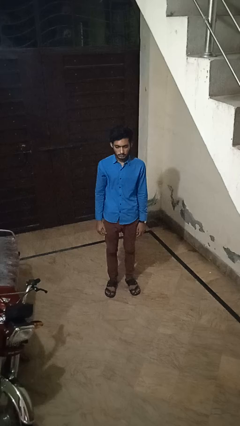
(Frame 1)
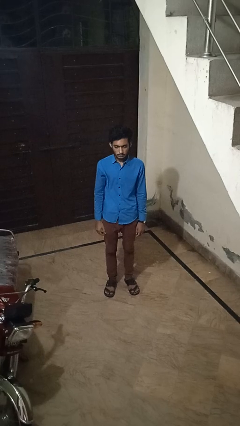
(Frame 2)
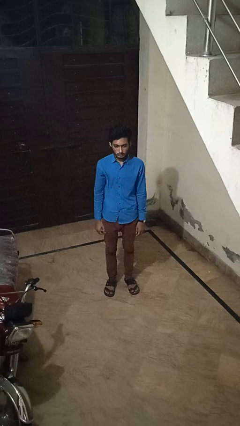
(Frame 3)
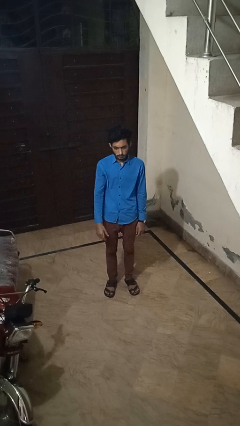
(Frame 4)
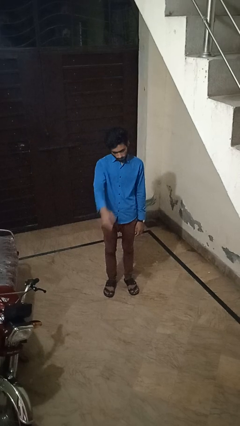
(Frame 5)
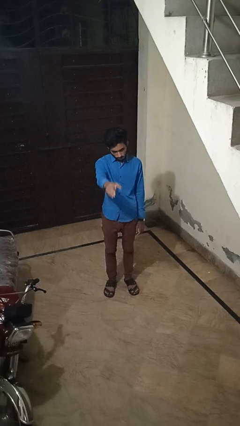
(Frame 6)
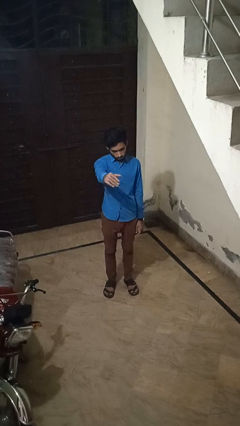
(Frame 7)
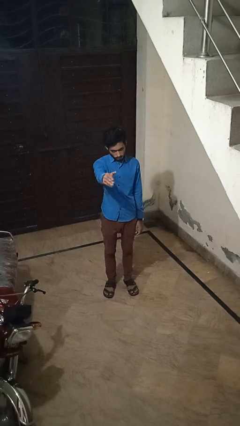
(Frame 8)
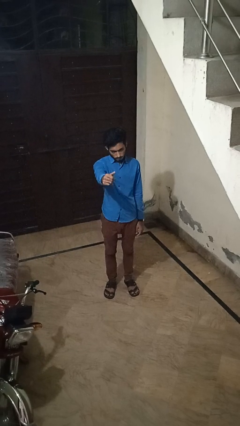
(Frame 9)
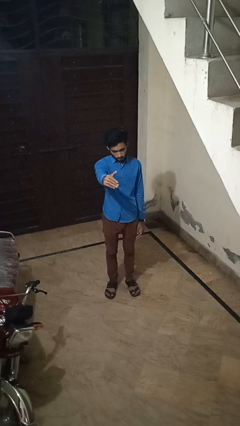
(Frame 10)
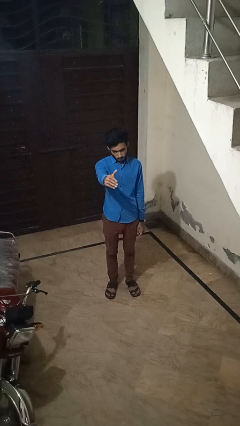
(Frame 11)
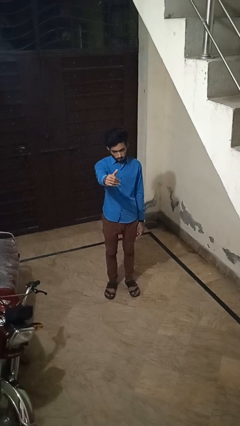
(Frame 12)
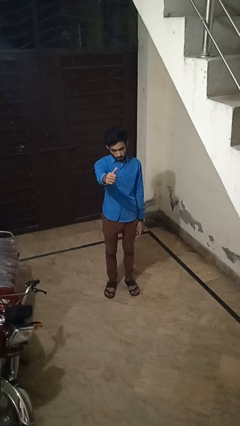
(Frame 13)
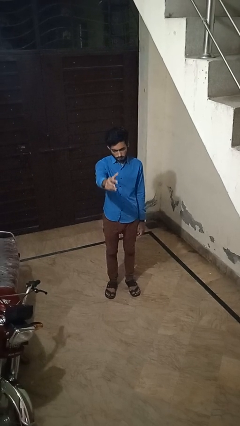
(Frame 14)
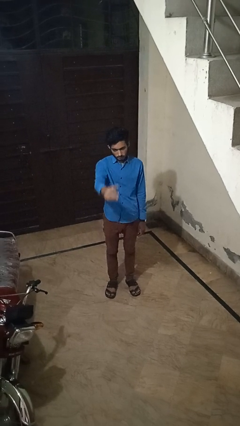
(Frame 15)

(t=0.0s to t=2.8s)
person gestures come here

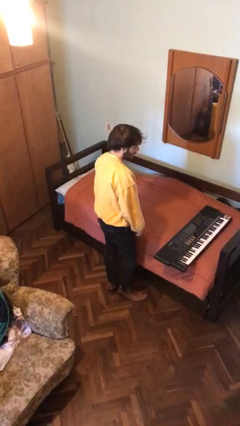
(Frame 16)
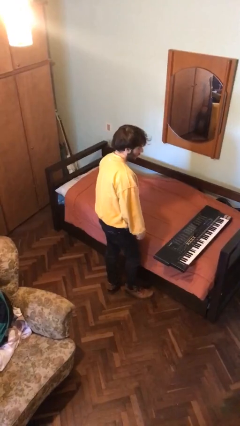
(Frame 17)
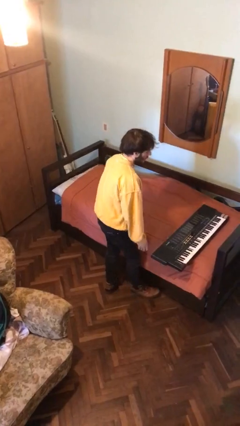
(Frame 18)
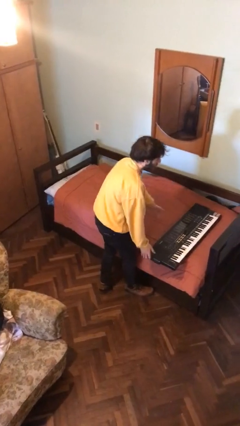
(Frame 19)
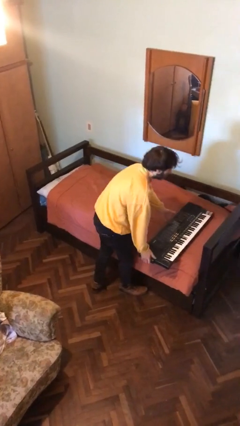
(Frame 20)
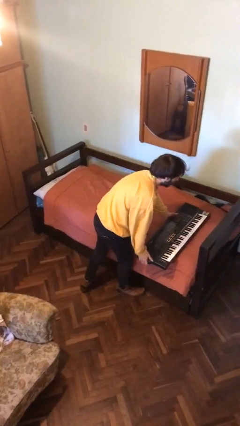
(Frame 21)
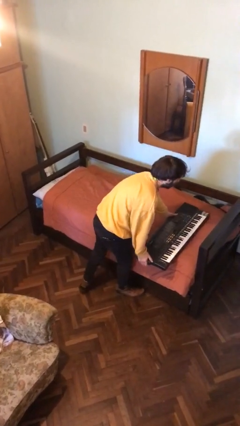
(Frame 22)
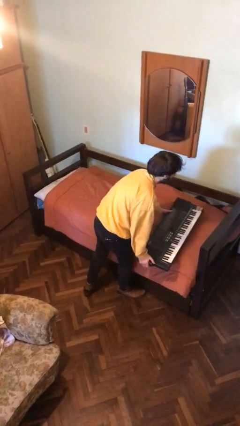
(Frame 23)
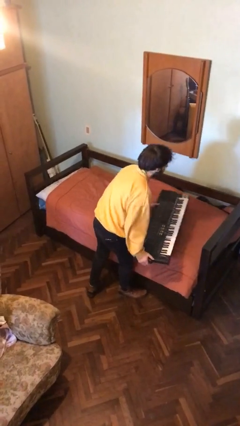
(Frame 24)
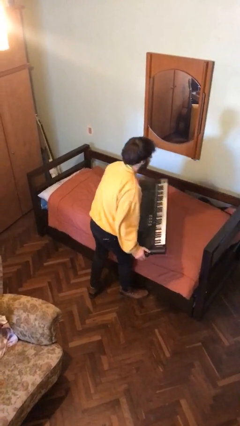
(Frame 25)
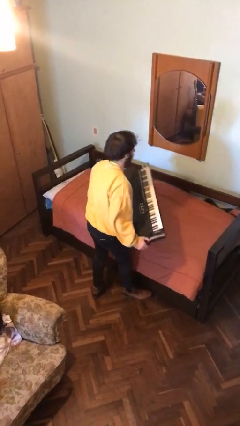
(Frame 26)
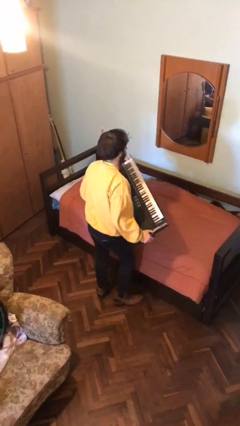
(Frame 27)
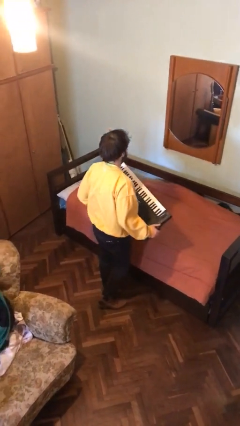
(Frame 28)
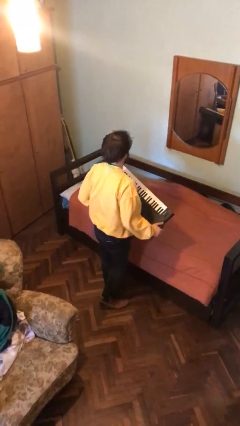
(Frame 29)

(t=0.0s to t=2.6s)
person picks up object from bed

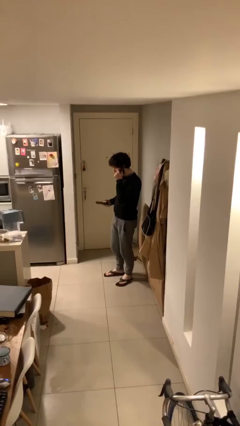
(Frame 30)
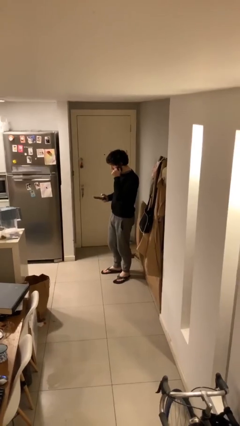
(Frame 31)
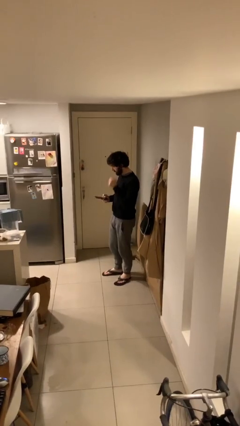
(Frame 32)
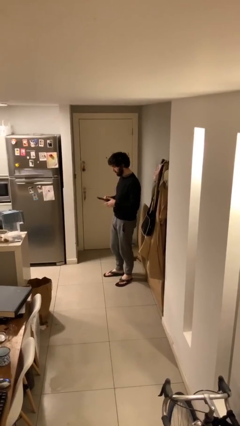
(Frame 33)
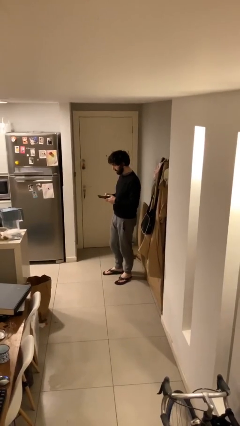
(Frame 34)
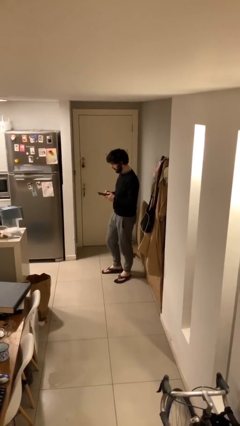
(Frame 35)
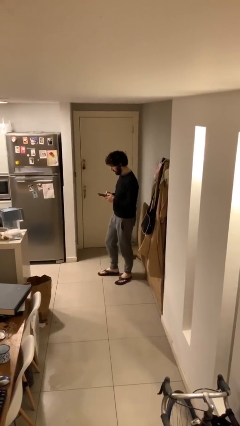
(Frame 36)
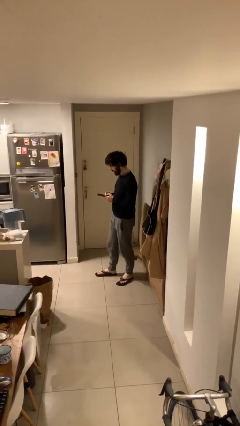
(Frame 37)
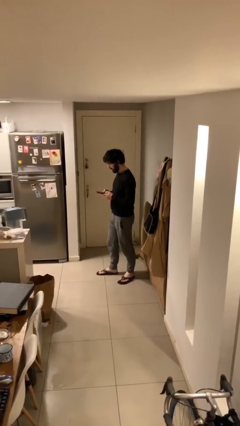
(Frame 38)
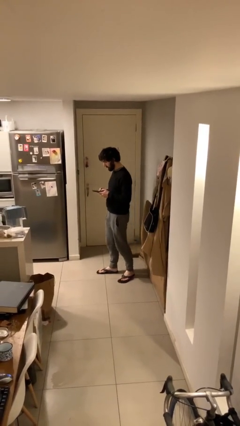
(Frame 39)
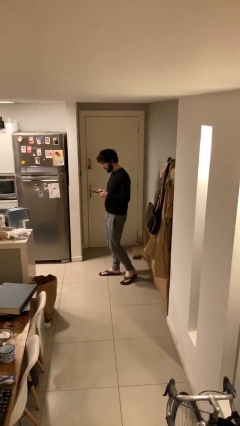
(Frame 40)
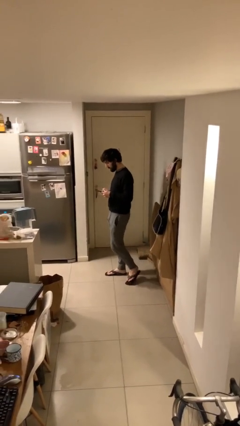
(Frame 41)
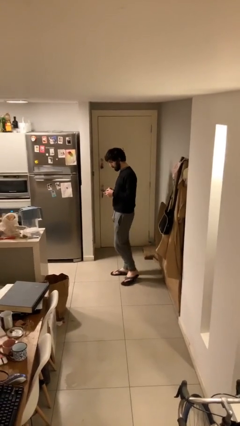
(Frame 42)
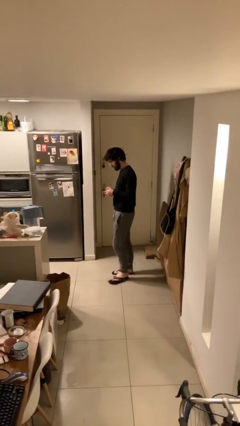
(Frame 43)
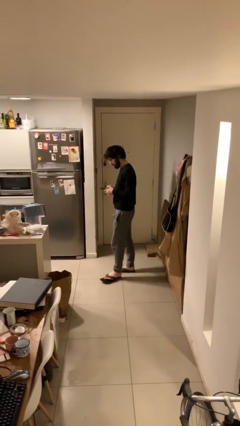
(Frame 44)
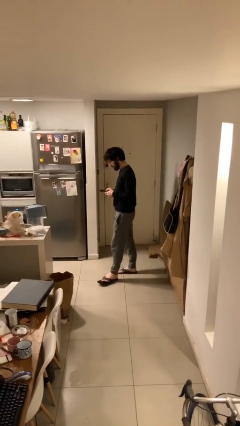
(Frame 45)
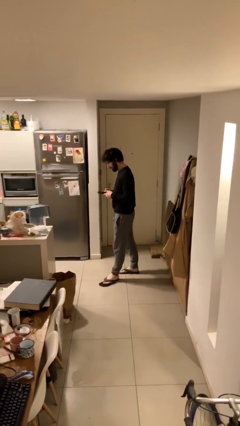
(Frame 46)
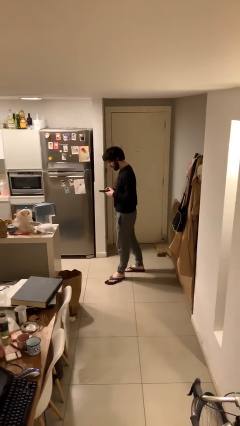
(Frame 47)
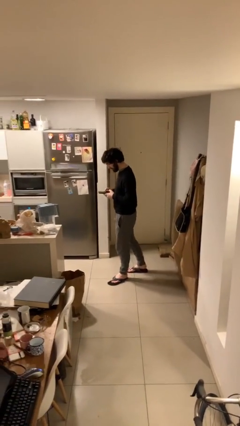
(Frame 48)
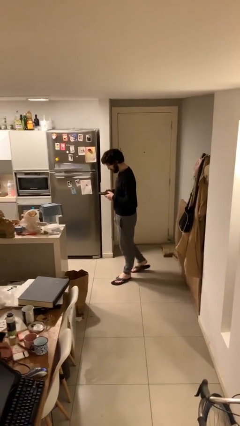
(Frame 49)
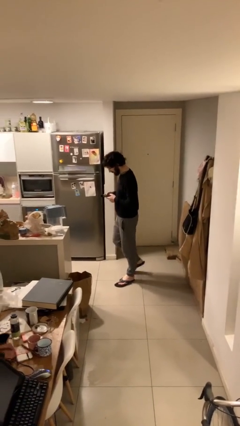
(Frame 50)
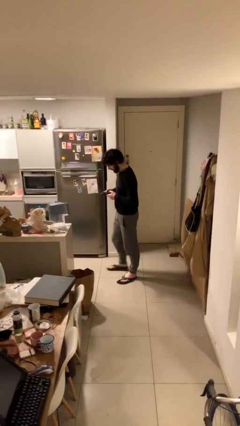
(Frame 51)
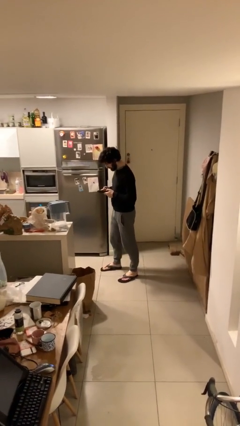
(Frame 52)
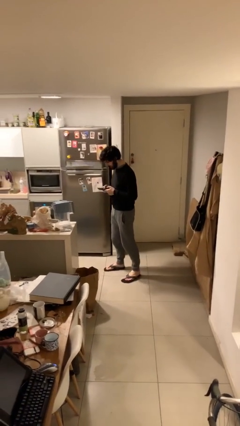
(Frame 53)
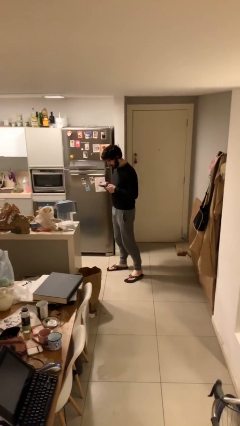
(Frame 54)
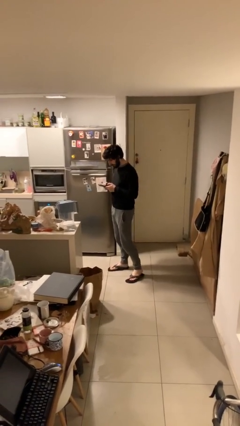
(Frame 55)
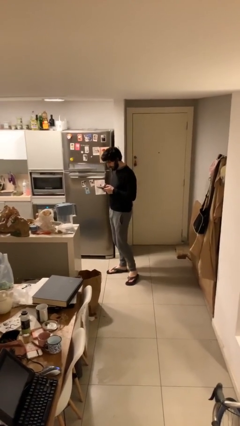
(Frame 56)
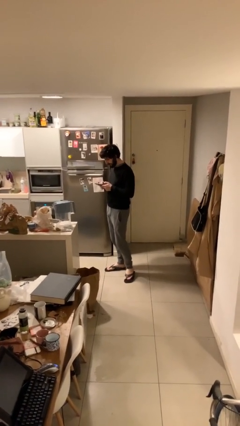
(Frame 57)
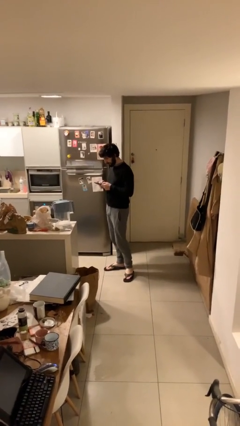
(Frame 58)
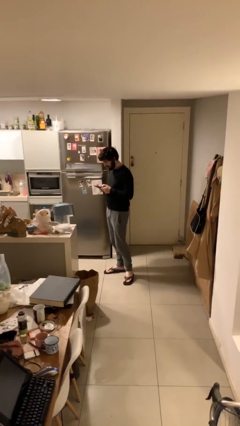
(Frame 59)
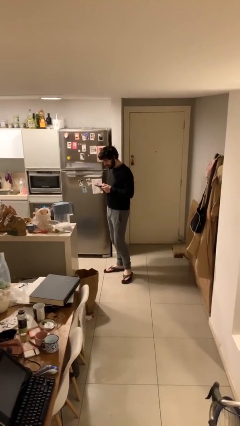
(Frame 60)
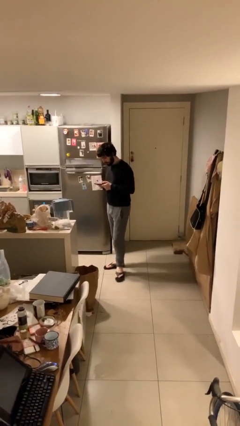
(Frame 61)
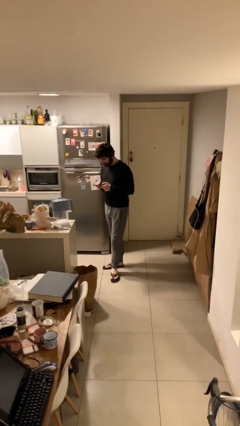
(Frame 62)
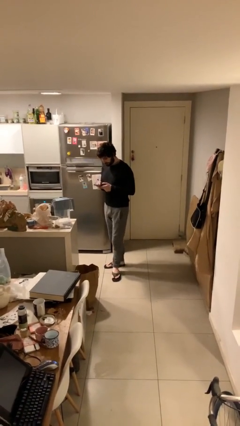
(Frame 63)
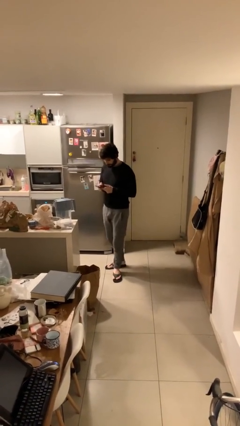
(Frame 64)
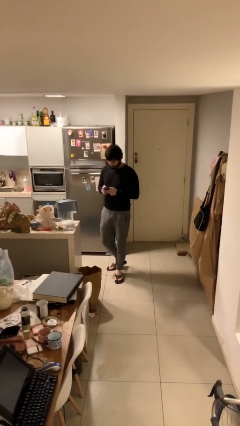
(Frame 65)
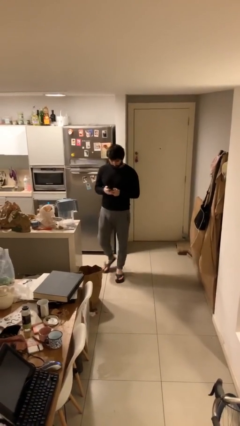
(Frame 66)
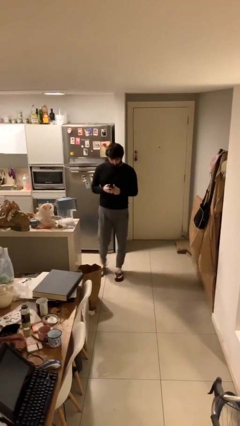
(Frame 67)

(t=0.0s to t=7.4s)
person texts on phone

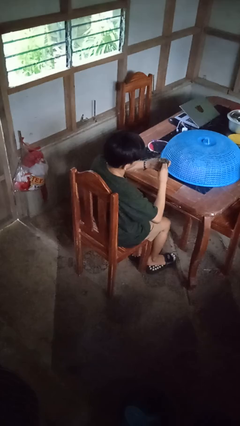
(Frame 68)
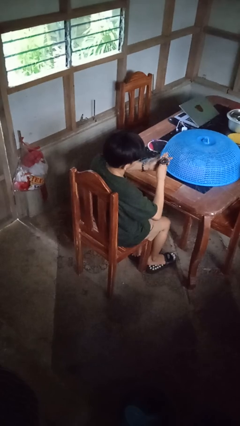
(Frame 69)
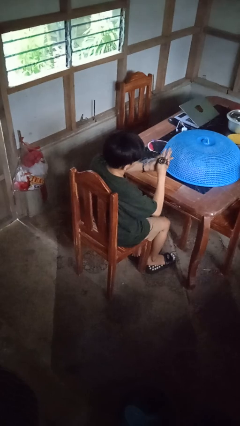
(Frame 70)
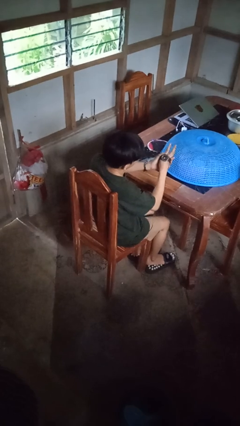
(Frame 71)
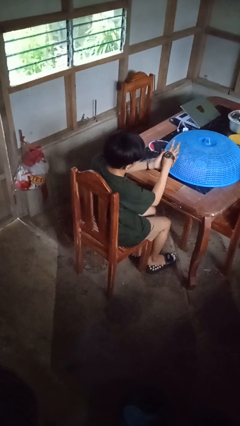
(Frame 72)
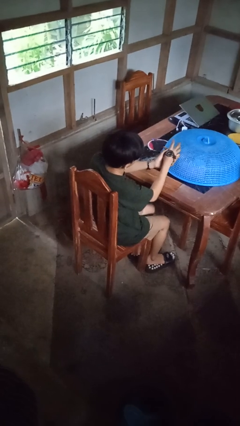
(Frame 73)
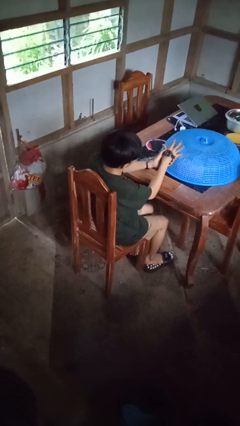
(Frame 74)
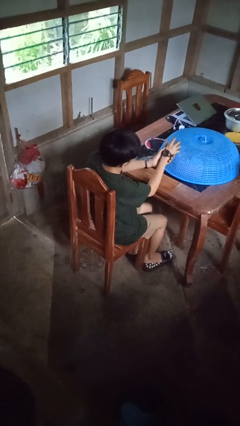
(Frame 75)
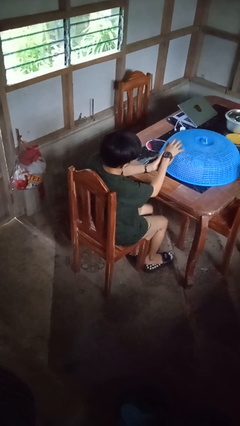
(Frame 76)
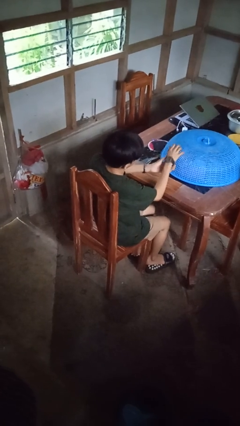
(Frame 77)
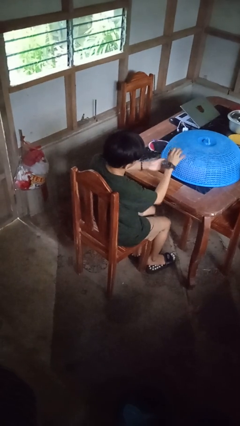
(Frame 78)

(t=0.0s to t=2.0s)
person puts on wristwatch

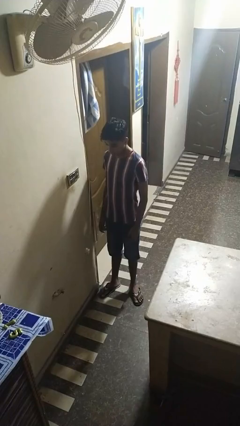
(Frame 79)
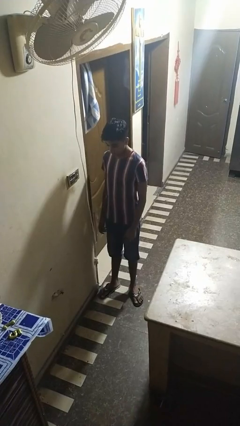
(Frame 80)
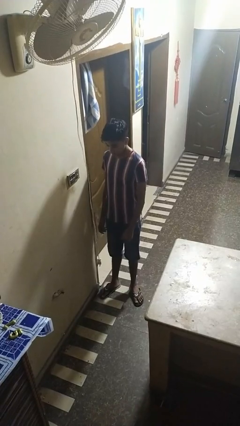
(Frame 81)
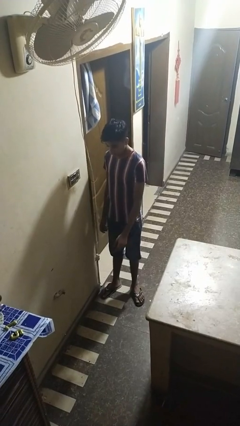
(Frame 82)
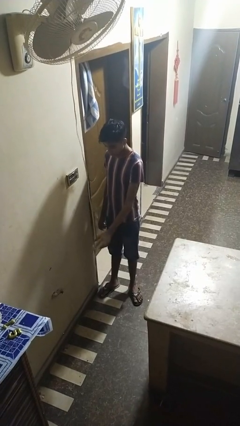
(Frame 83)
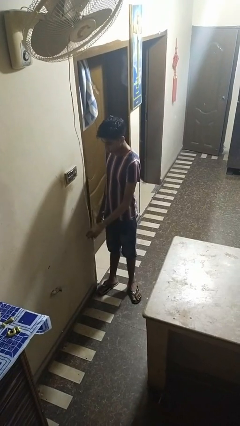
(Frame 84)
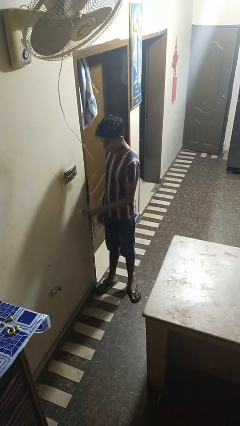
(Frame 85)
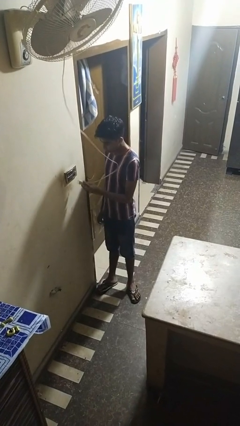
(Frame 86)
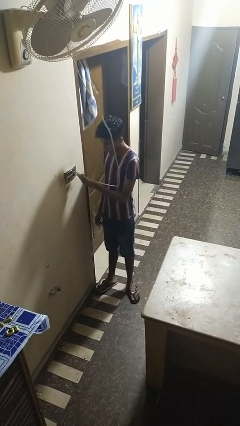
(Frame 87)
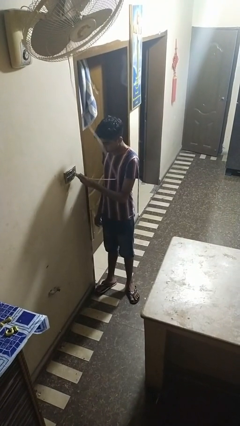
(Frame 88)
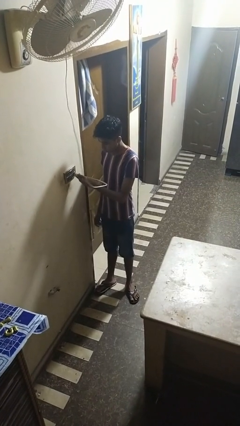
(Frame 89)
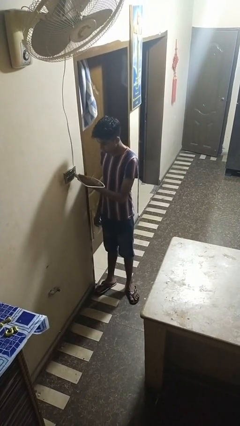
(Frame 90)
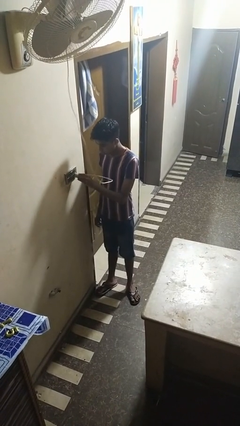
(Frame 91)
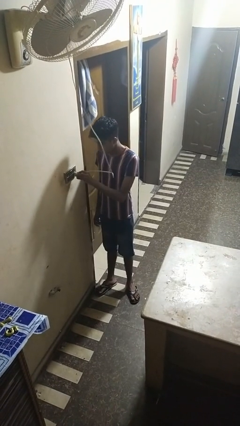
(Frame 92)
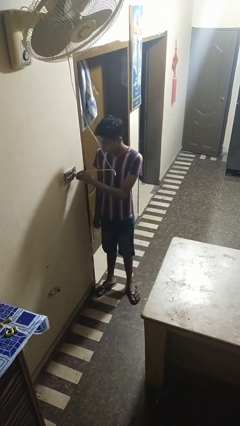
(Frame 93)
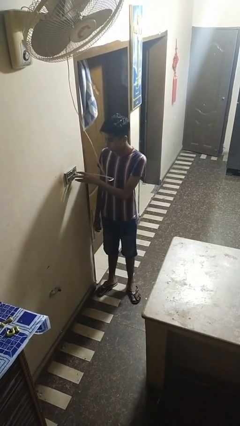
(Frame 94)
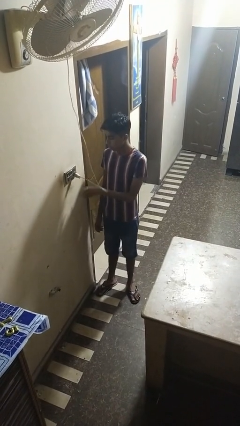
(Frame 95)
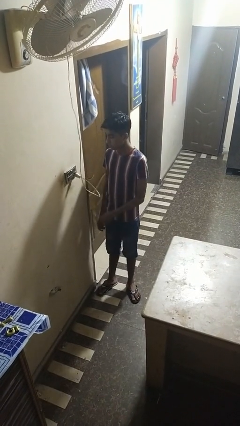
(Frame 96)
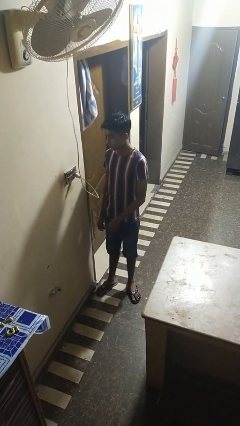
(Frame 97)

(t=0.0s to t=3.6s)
person plugs into electrical socket
